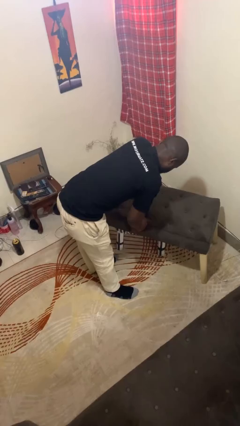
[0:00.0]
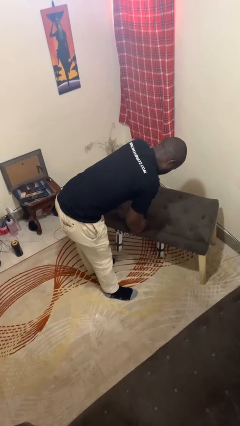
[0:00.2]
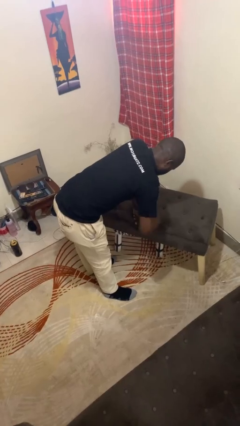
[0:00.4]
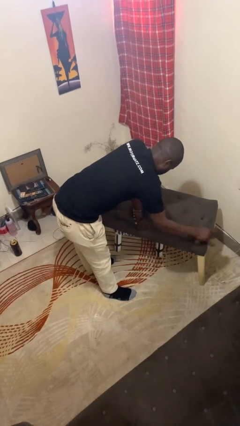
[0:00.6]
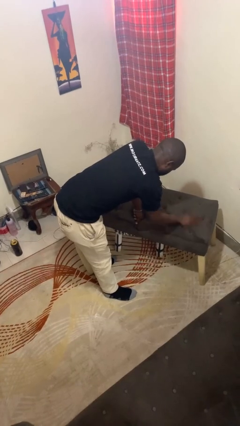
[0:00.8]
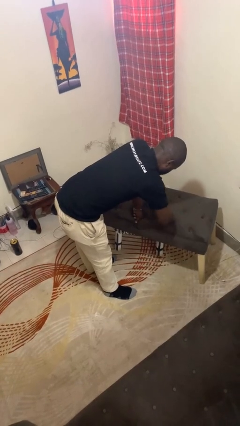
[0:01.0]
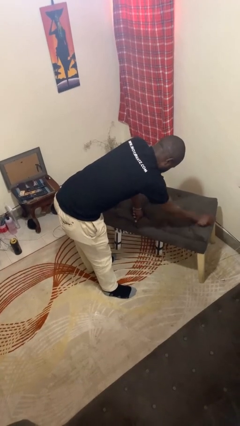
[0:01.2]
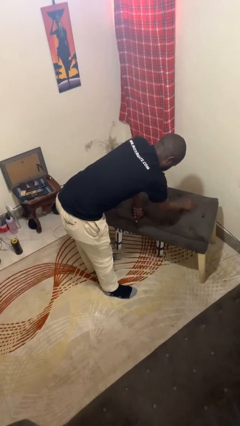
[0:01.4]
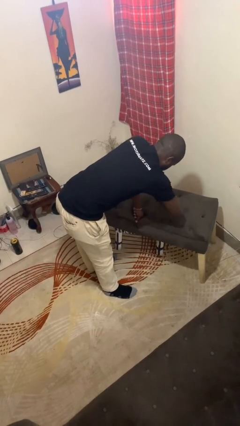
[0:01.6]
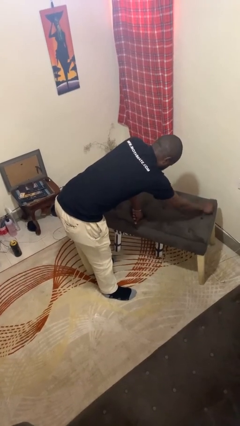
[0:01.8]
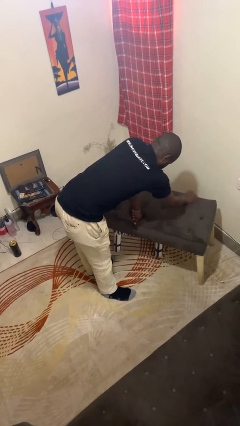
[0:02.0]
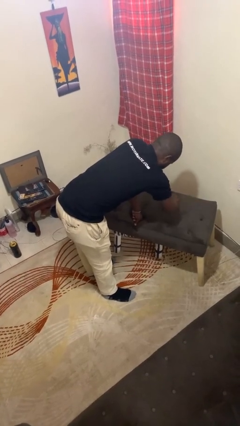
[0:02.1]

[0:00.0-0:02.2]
person cleans table with rag

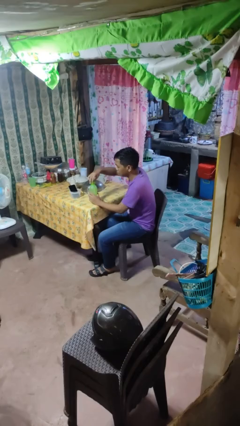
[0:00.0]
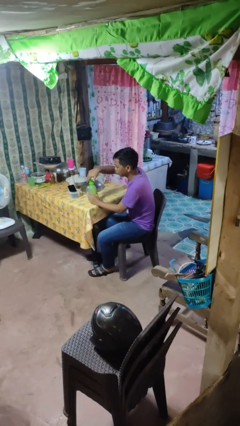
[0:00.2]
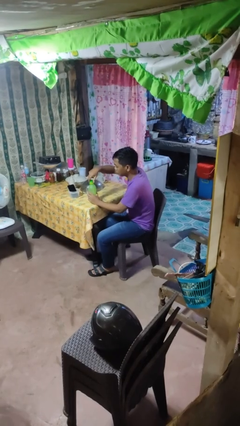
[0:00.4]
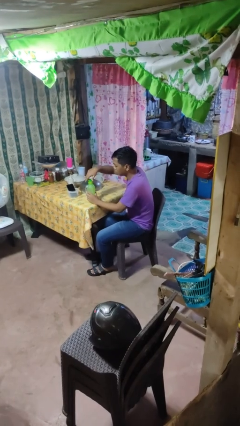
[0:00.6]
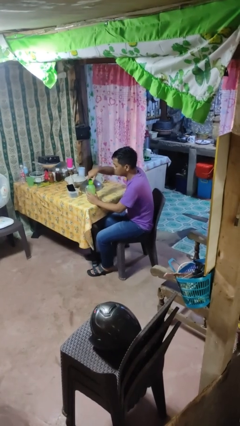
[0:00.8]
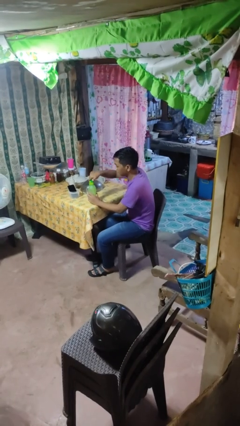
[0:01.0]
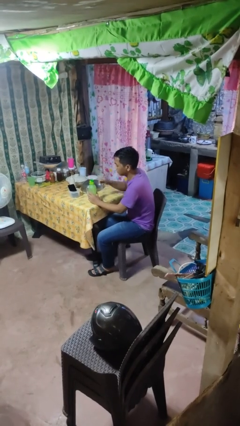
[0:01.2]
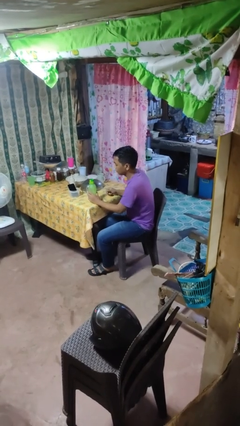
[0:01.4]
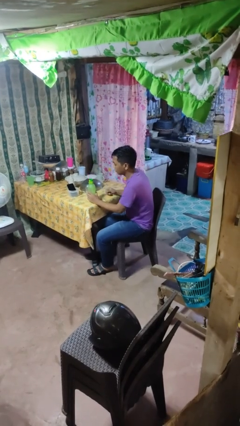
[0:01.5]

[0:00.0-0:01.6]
person screws lid to bottle

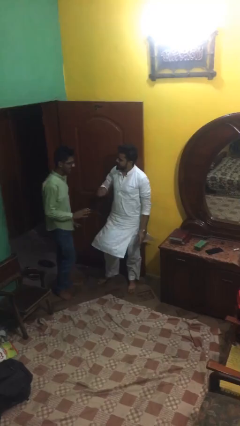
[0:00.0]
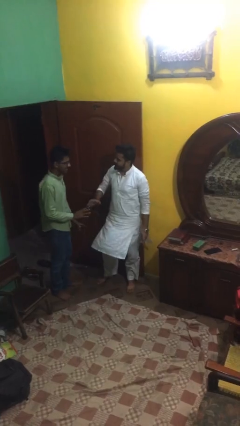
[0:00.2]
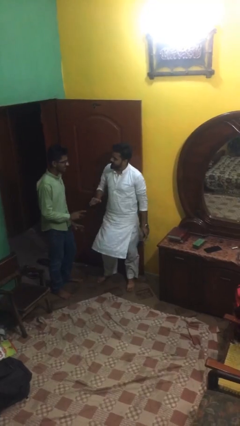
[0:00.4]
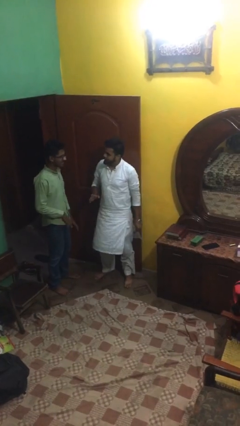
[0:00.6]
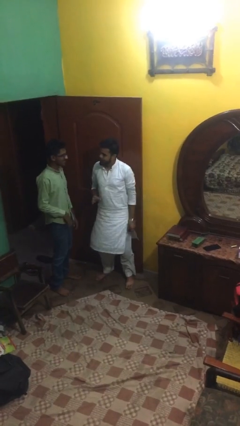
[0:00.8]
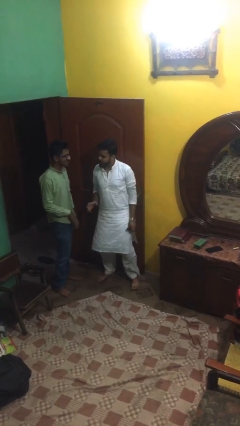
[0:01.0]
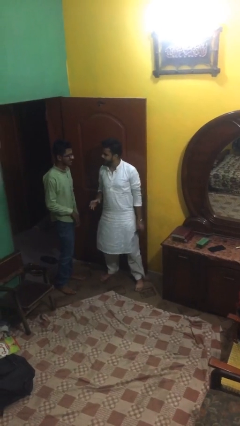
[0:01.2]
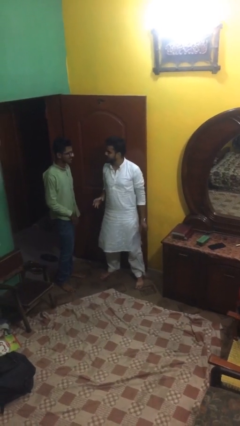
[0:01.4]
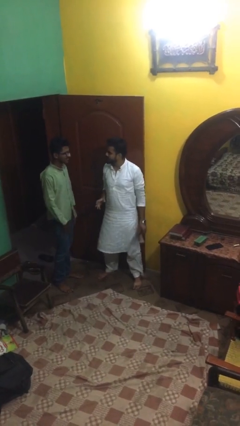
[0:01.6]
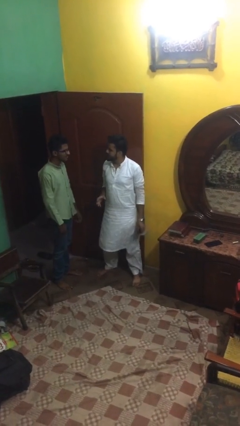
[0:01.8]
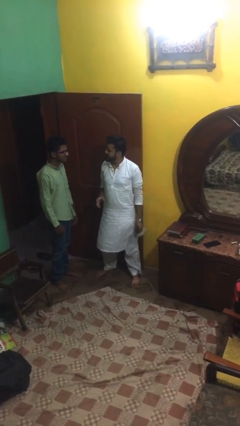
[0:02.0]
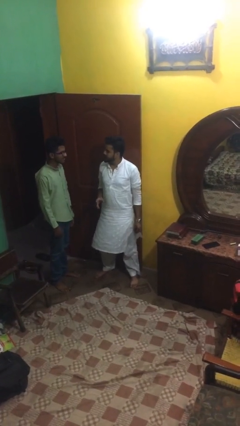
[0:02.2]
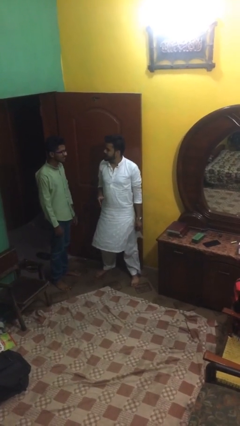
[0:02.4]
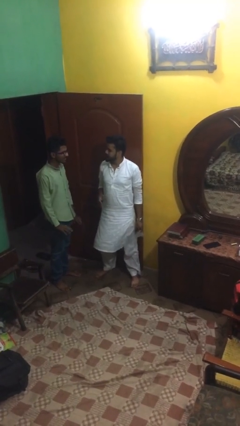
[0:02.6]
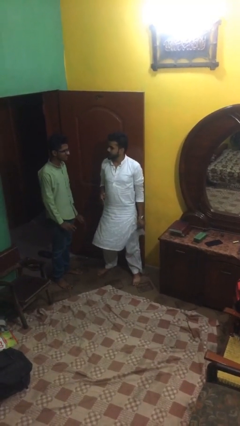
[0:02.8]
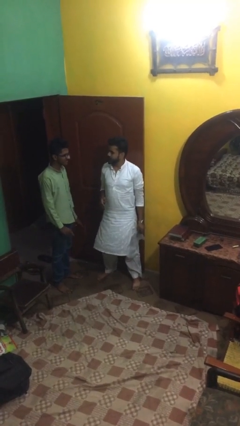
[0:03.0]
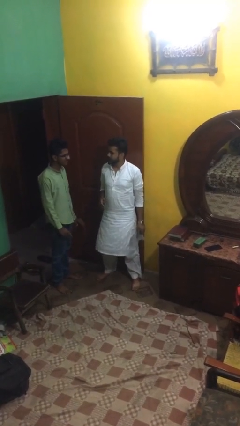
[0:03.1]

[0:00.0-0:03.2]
person talks to person

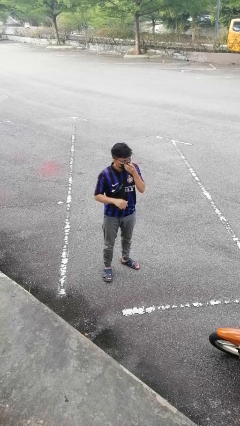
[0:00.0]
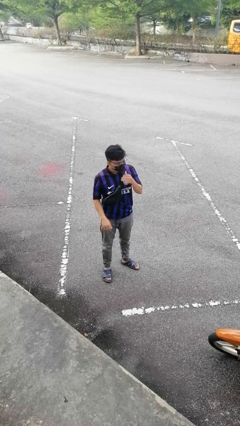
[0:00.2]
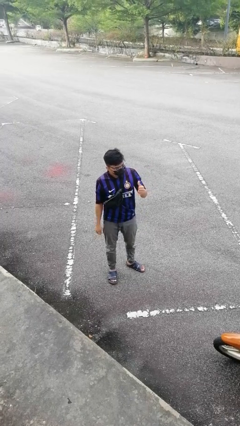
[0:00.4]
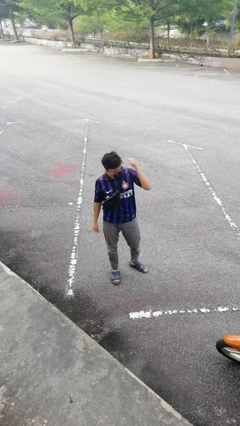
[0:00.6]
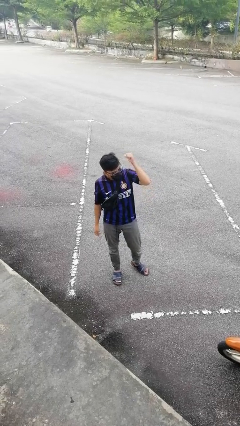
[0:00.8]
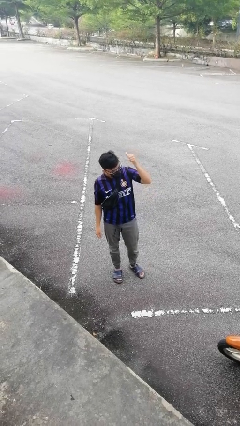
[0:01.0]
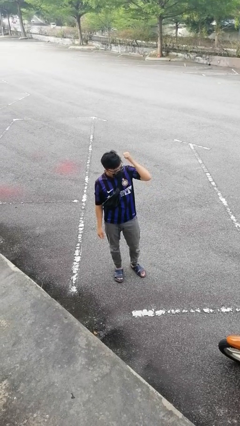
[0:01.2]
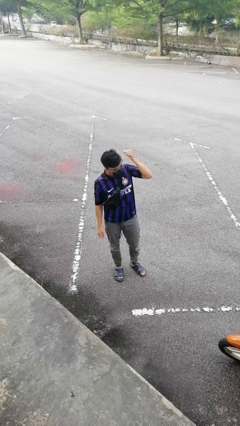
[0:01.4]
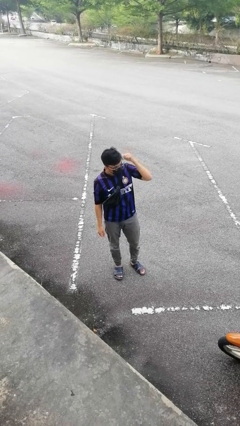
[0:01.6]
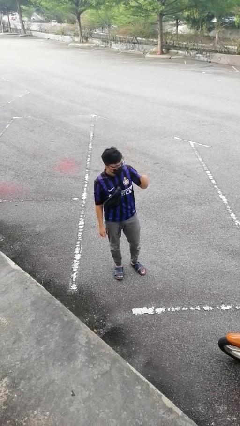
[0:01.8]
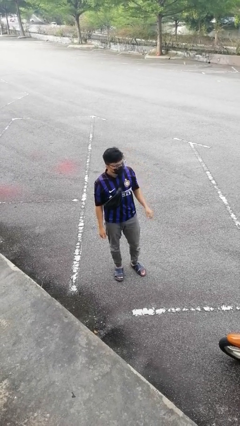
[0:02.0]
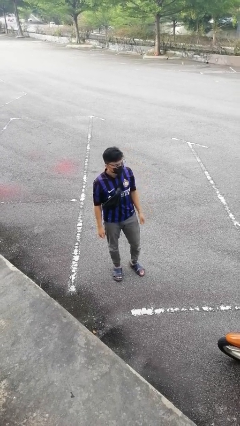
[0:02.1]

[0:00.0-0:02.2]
person gestures behind me

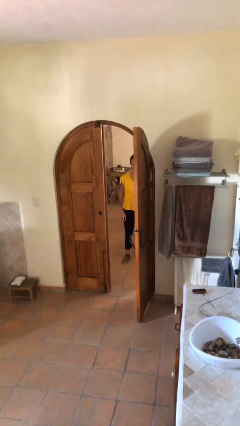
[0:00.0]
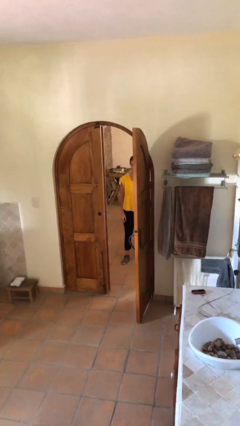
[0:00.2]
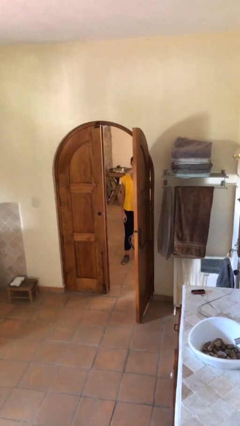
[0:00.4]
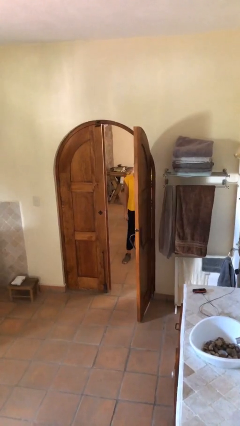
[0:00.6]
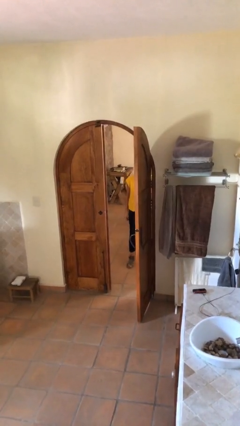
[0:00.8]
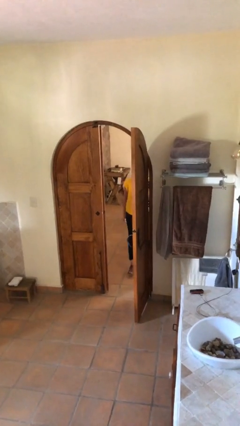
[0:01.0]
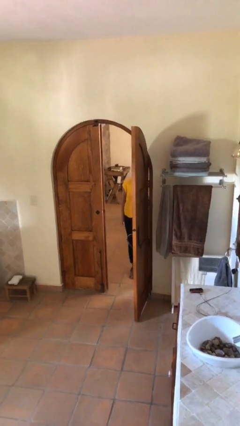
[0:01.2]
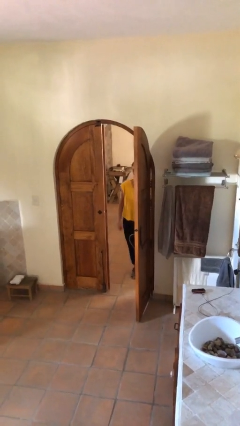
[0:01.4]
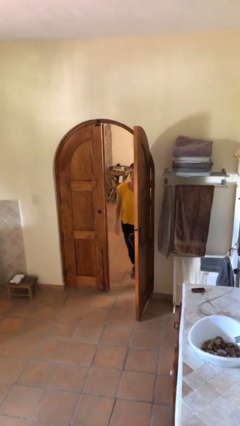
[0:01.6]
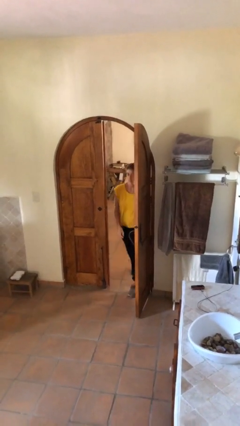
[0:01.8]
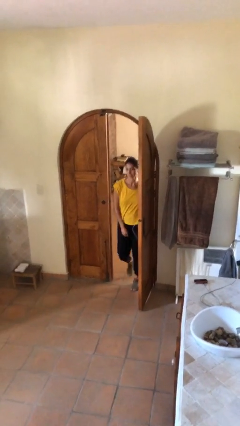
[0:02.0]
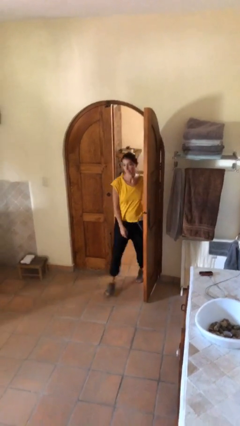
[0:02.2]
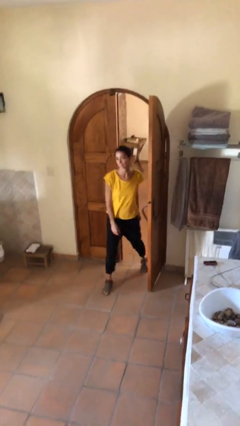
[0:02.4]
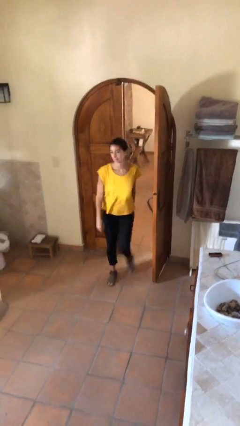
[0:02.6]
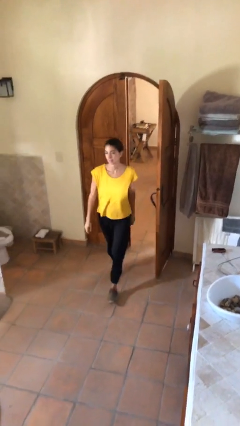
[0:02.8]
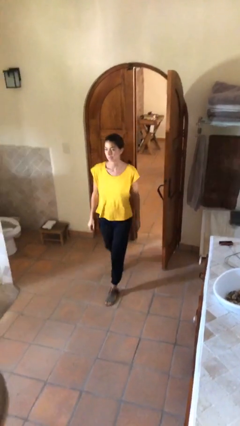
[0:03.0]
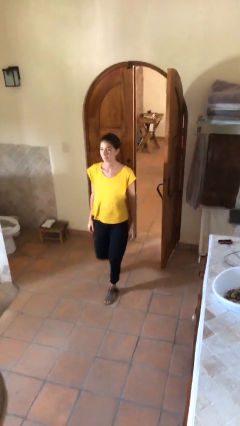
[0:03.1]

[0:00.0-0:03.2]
person enters scene through structure

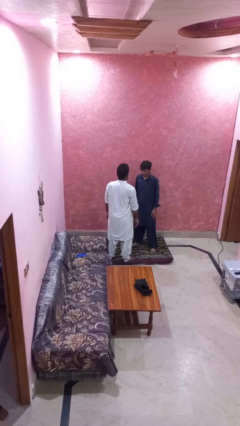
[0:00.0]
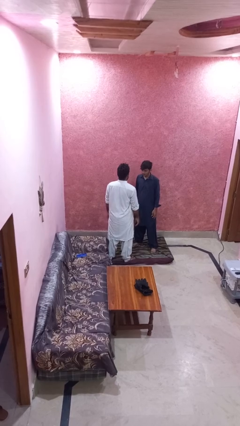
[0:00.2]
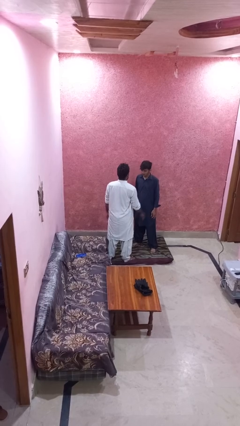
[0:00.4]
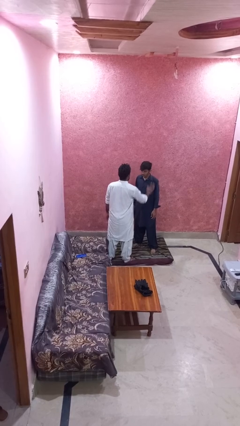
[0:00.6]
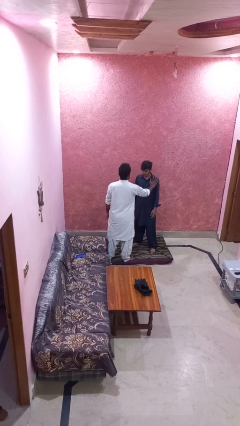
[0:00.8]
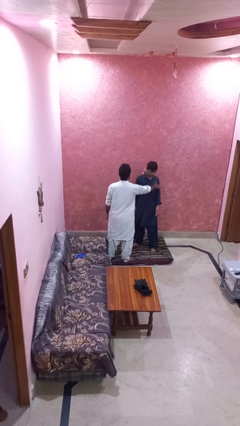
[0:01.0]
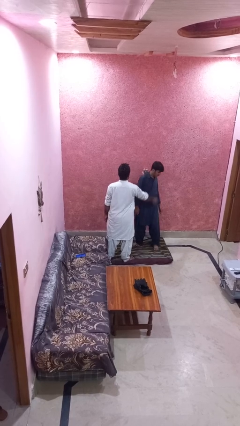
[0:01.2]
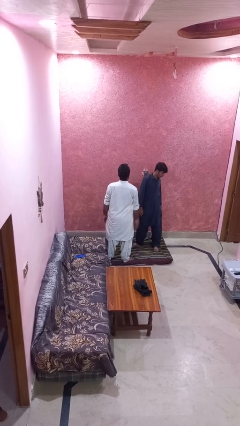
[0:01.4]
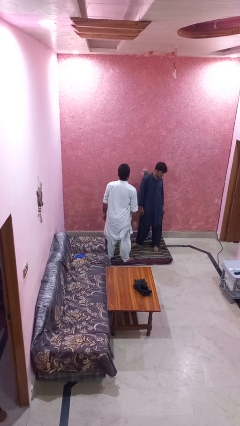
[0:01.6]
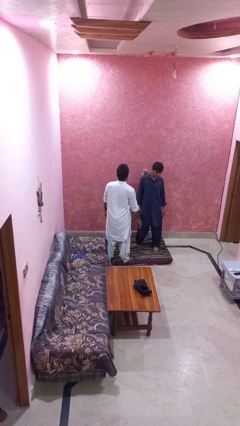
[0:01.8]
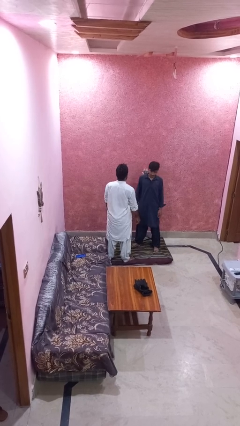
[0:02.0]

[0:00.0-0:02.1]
person shoves person

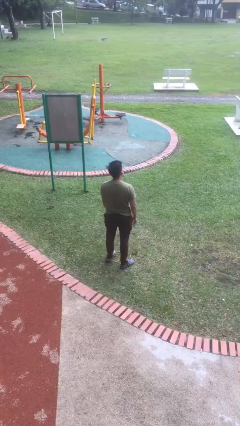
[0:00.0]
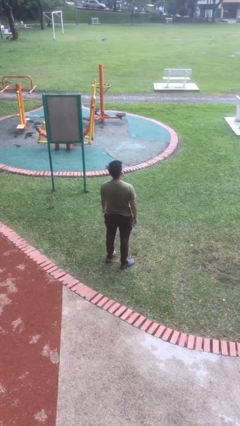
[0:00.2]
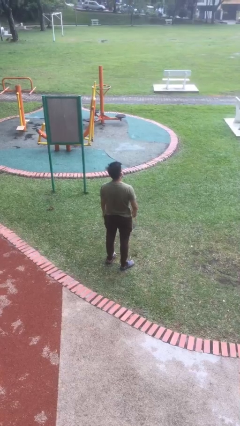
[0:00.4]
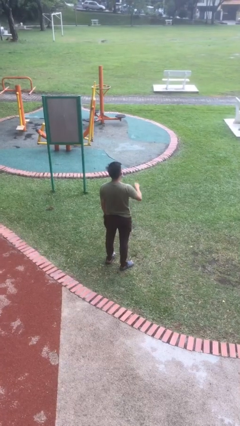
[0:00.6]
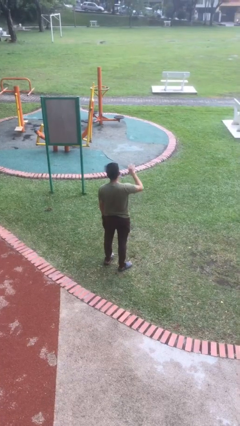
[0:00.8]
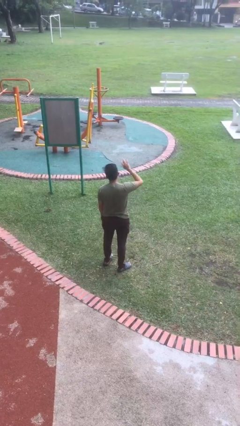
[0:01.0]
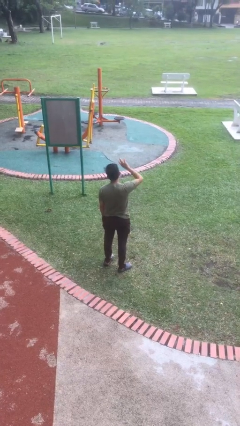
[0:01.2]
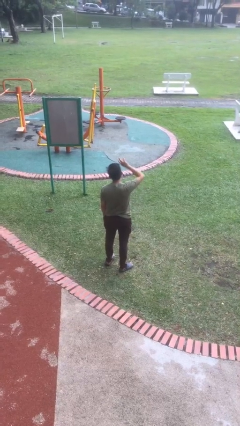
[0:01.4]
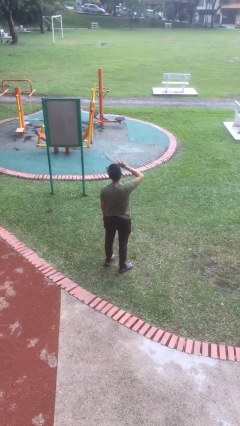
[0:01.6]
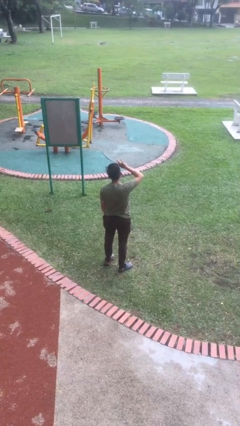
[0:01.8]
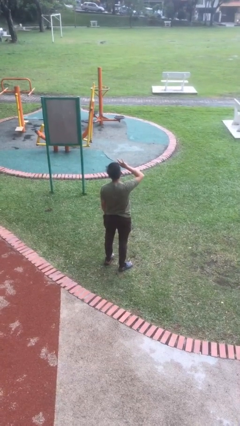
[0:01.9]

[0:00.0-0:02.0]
person shades eyes

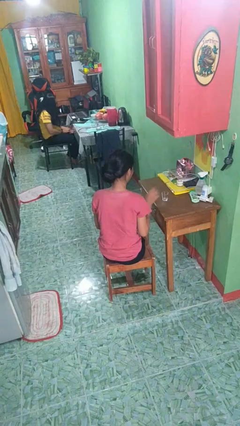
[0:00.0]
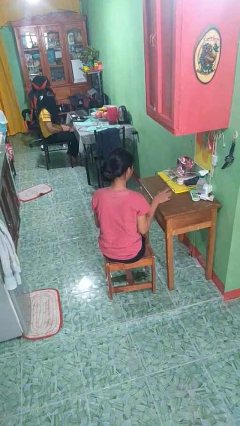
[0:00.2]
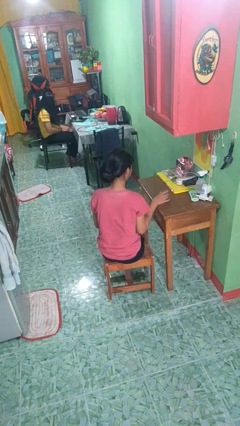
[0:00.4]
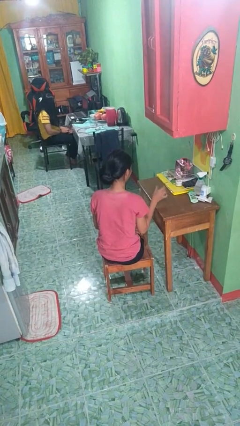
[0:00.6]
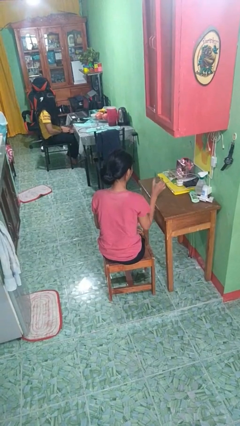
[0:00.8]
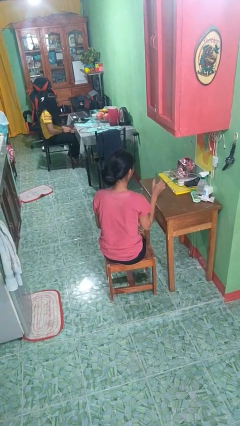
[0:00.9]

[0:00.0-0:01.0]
person picks up object from table
